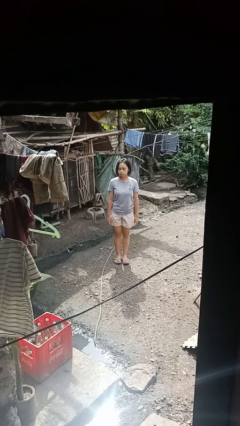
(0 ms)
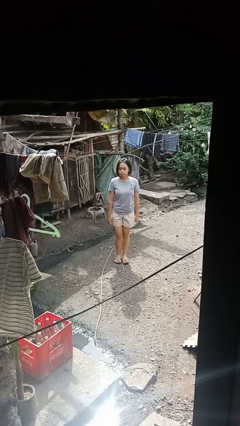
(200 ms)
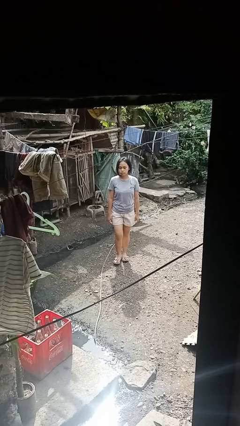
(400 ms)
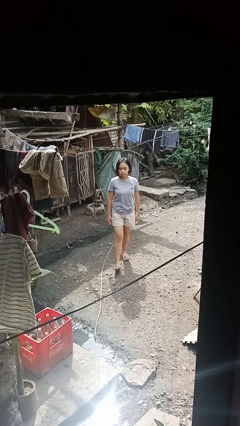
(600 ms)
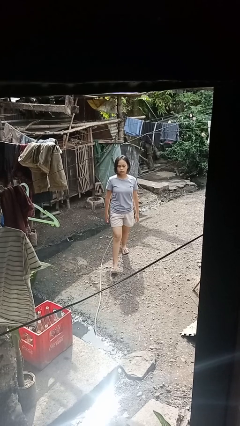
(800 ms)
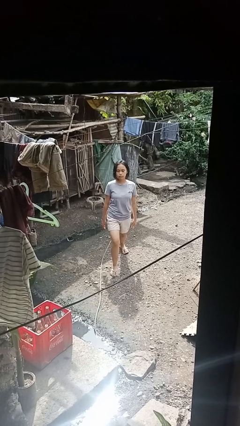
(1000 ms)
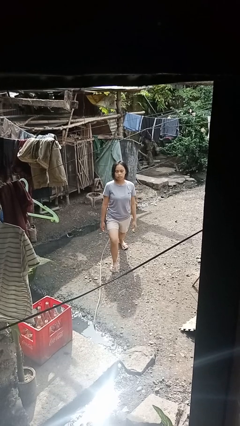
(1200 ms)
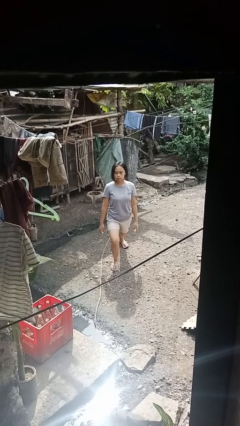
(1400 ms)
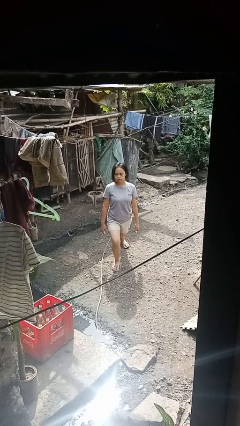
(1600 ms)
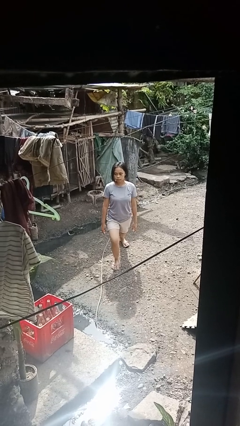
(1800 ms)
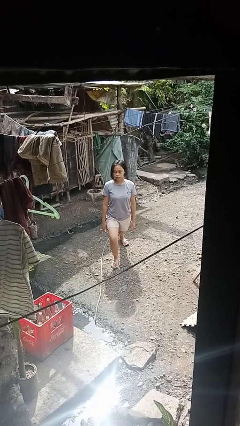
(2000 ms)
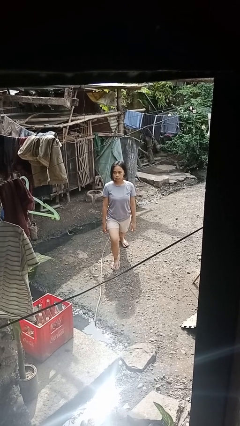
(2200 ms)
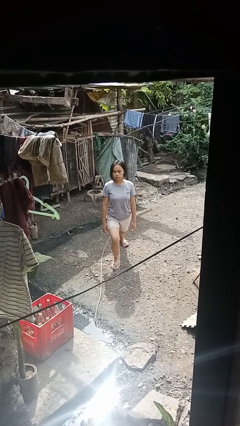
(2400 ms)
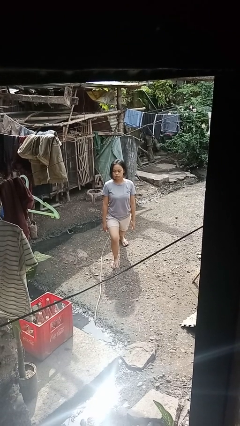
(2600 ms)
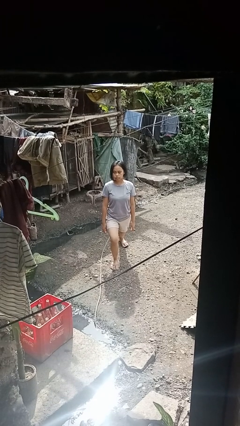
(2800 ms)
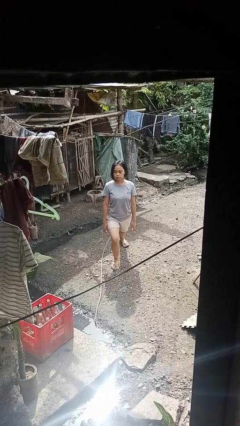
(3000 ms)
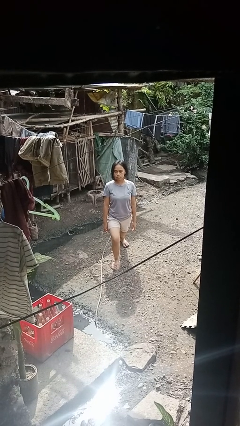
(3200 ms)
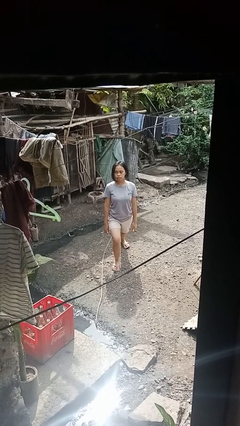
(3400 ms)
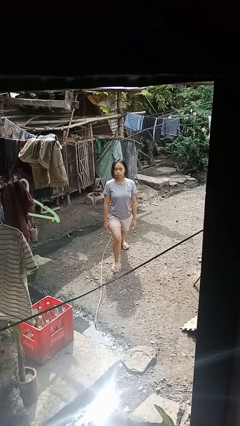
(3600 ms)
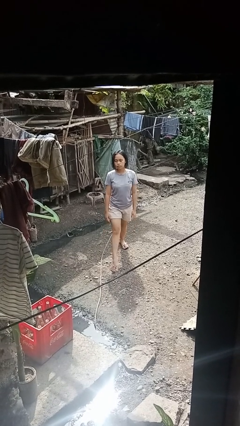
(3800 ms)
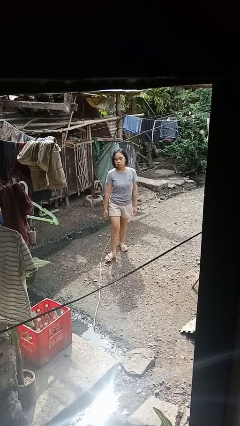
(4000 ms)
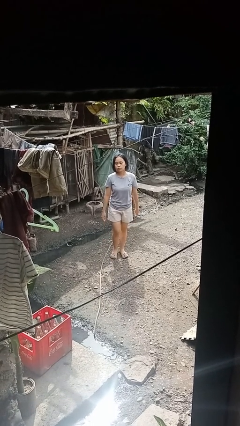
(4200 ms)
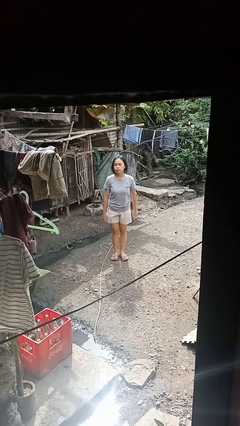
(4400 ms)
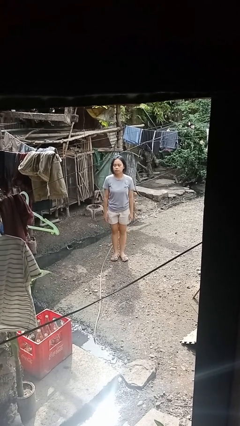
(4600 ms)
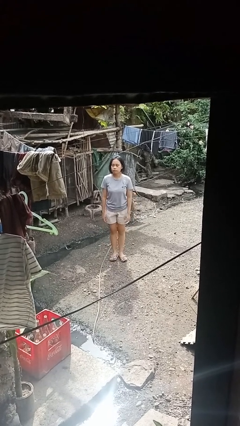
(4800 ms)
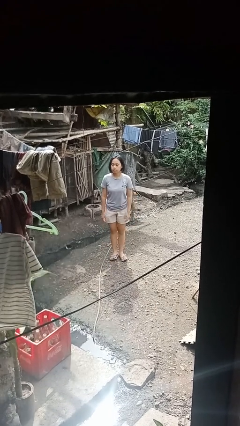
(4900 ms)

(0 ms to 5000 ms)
person exercises with lunges

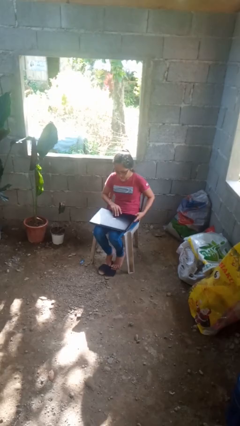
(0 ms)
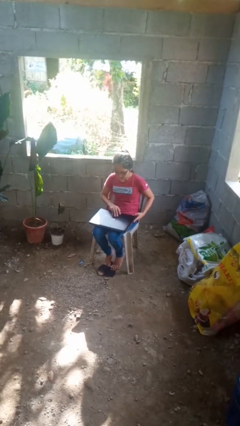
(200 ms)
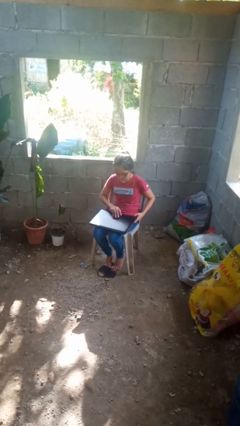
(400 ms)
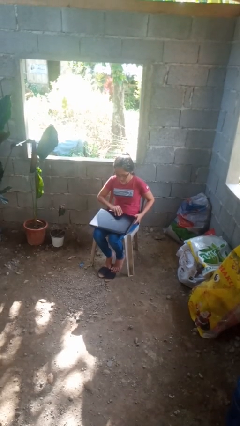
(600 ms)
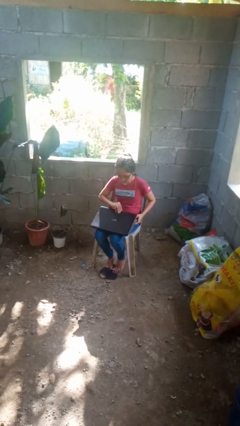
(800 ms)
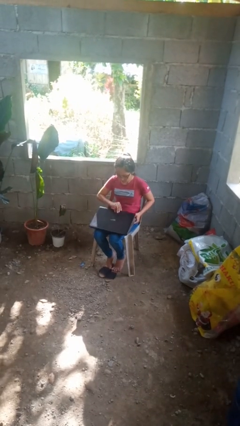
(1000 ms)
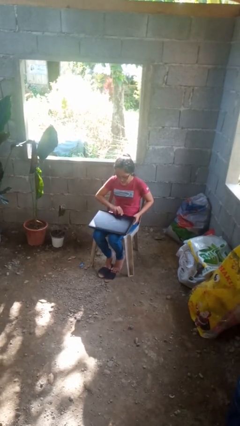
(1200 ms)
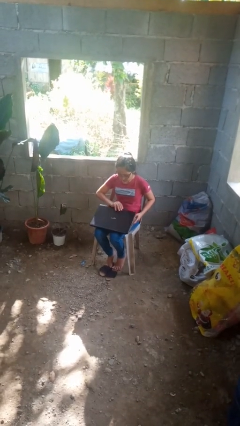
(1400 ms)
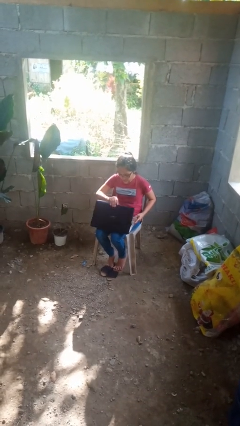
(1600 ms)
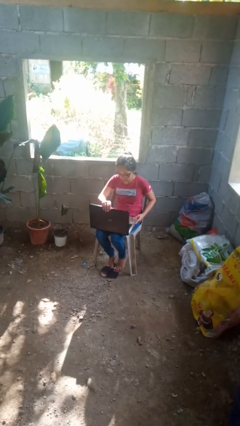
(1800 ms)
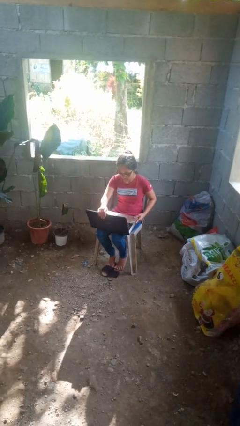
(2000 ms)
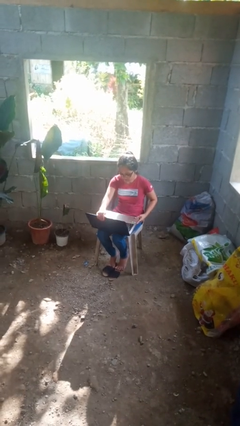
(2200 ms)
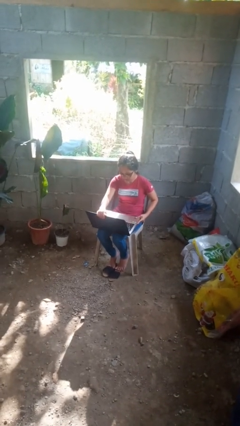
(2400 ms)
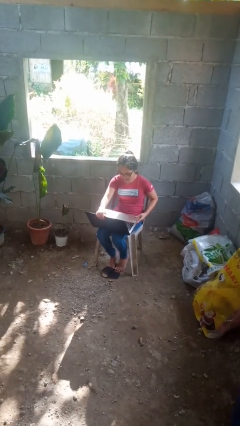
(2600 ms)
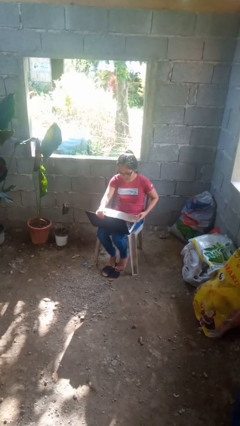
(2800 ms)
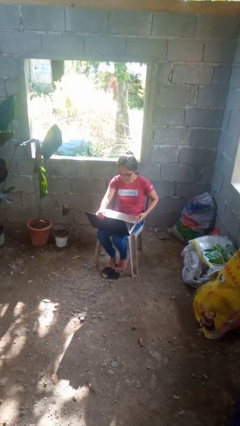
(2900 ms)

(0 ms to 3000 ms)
person opens laptop

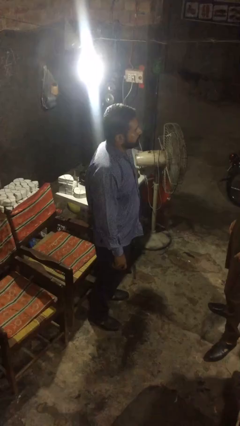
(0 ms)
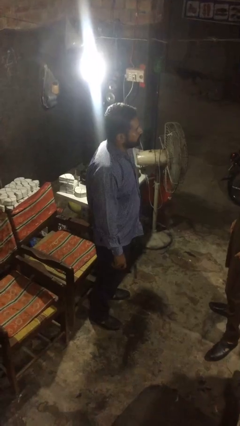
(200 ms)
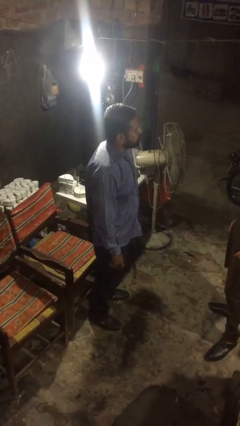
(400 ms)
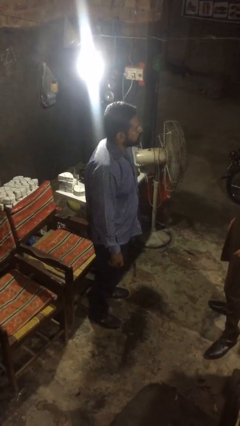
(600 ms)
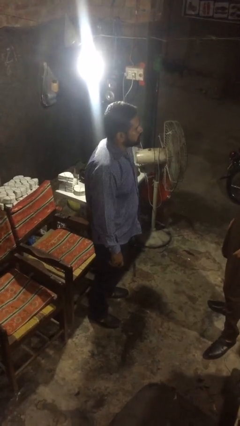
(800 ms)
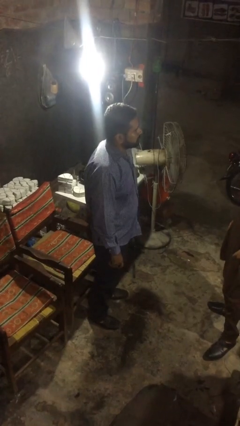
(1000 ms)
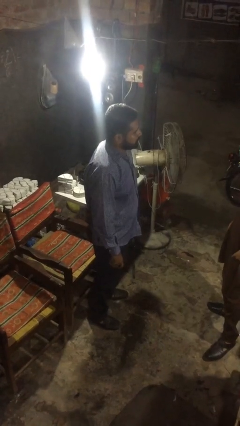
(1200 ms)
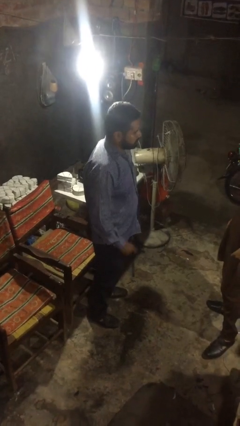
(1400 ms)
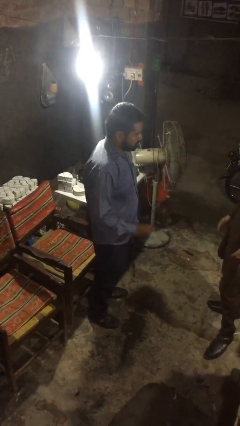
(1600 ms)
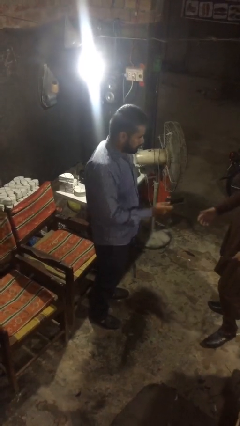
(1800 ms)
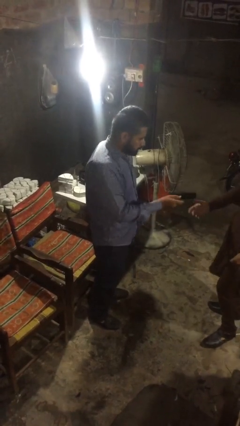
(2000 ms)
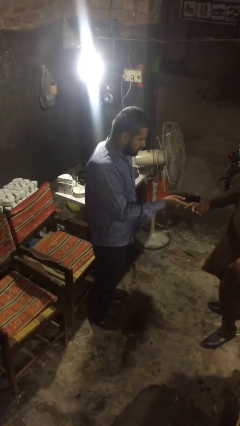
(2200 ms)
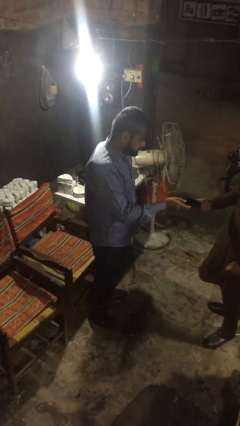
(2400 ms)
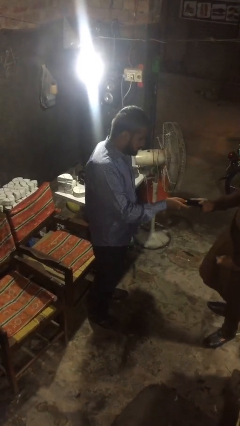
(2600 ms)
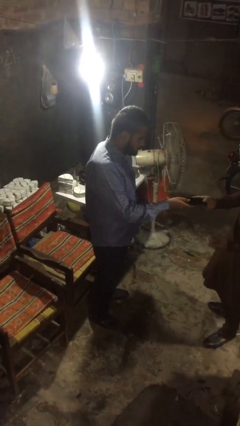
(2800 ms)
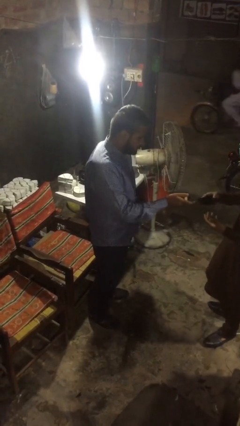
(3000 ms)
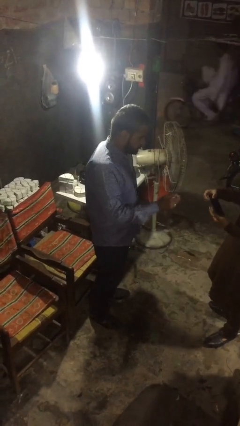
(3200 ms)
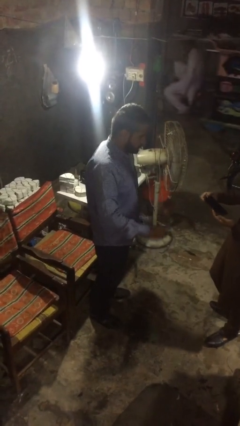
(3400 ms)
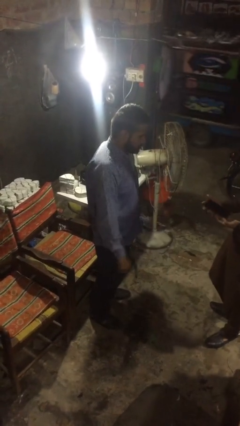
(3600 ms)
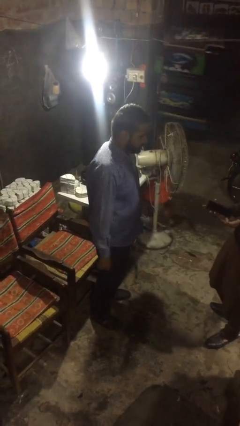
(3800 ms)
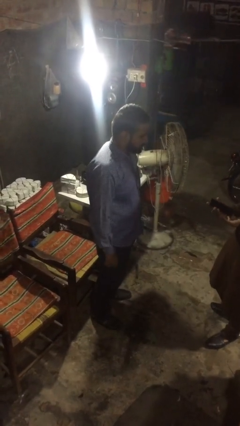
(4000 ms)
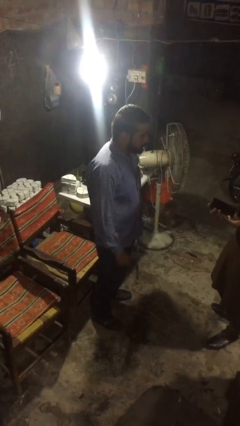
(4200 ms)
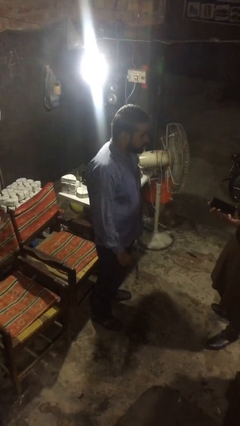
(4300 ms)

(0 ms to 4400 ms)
person transfers object to person

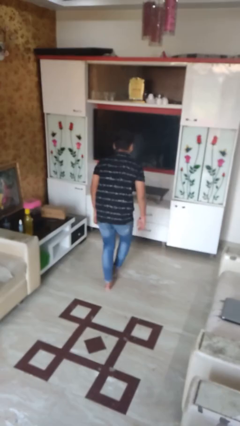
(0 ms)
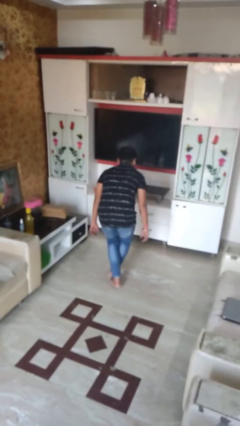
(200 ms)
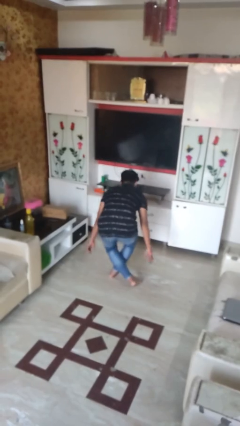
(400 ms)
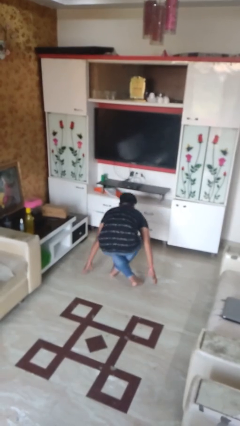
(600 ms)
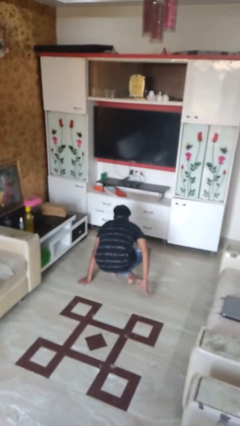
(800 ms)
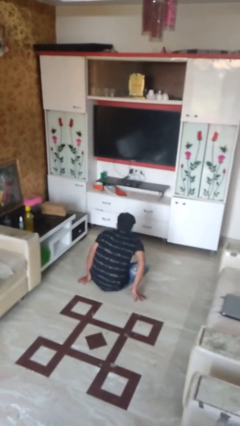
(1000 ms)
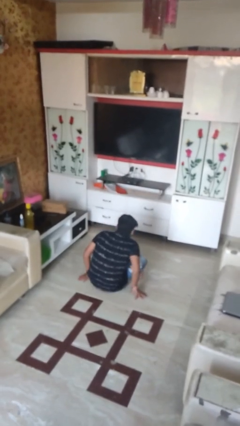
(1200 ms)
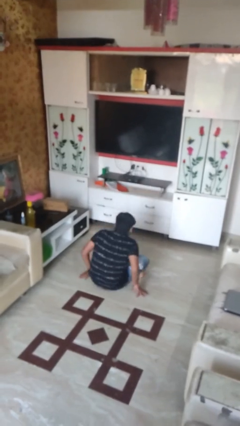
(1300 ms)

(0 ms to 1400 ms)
person sits crisscross

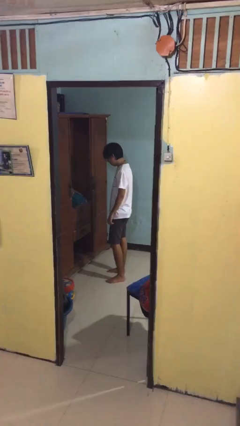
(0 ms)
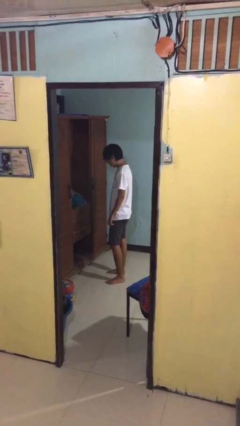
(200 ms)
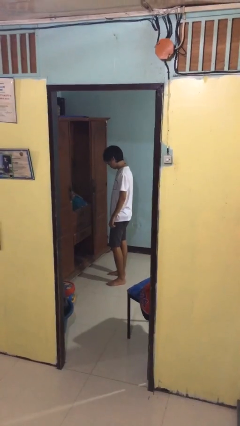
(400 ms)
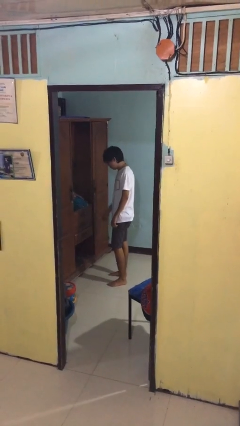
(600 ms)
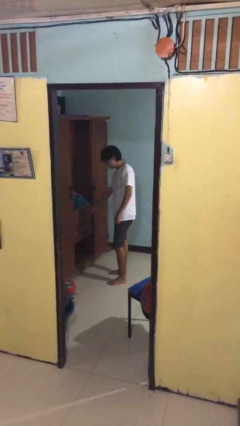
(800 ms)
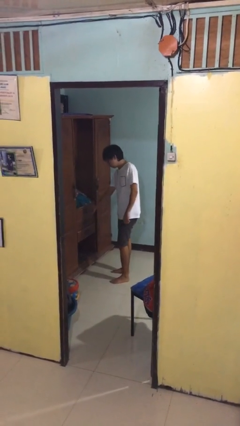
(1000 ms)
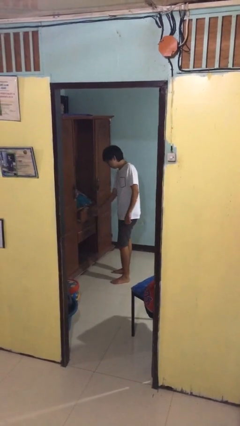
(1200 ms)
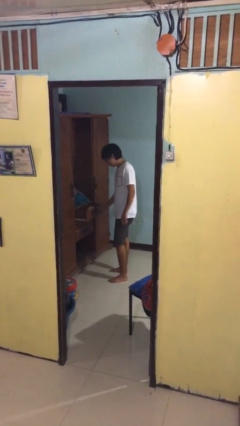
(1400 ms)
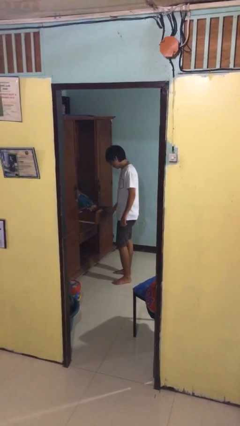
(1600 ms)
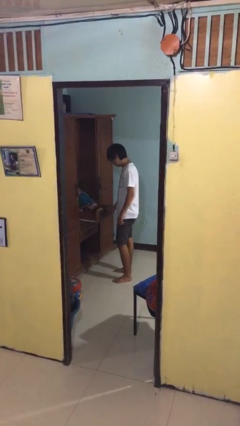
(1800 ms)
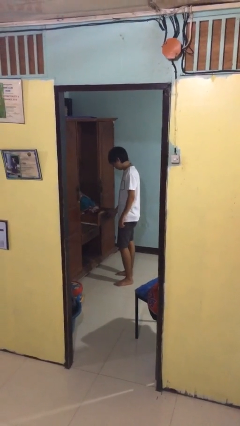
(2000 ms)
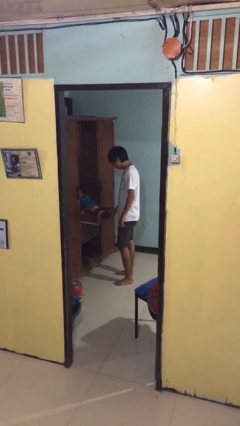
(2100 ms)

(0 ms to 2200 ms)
person opens dresser drawer

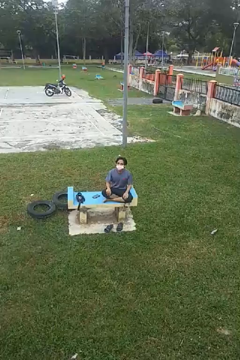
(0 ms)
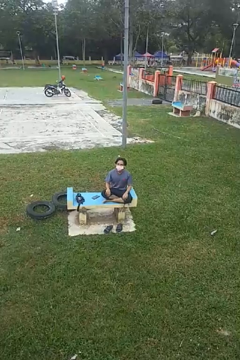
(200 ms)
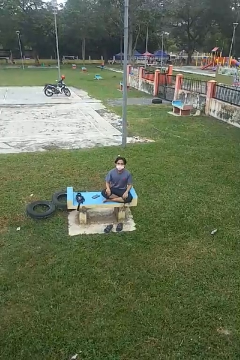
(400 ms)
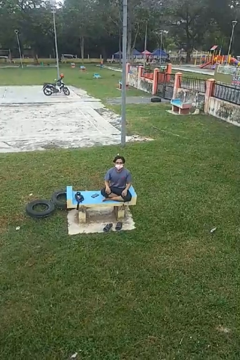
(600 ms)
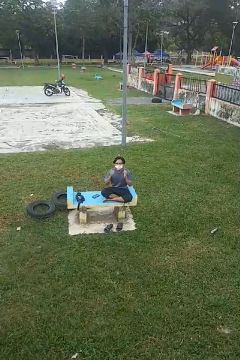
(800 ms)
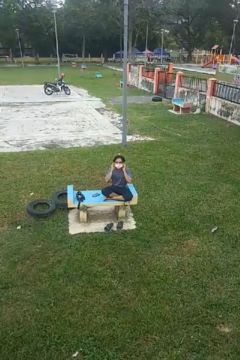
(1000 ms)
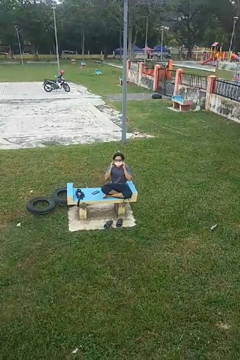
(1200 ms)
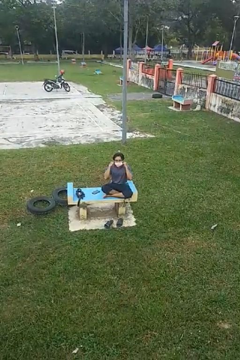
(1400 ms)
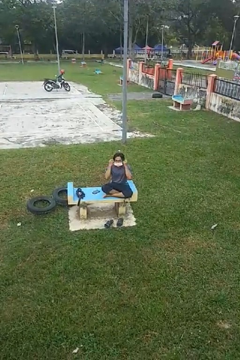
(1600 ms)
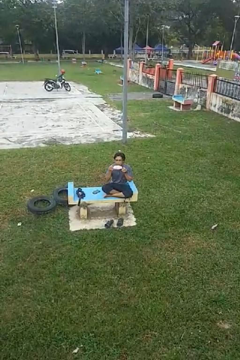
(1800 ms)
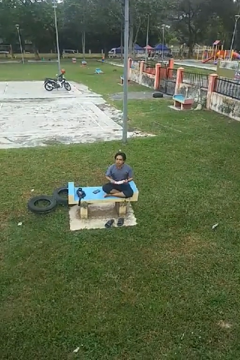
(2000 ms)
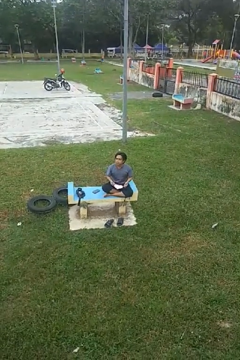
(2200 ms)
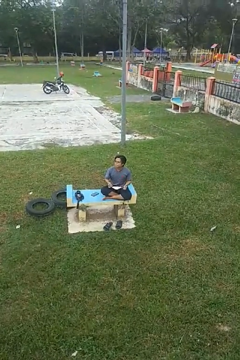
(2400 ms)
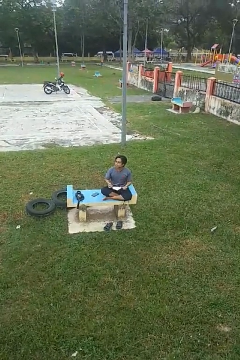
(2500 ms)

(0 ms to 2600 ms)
person takes off facemask
